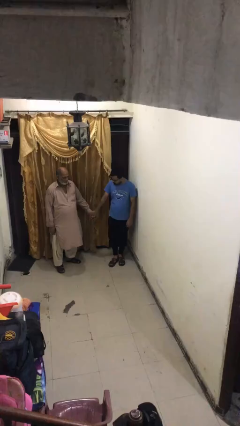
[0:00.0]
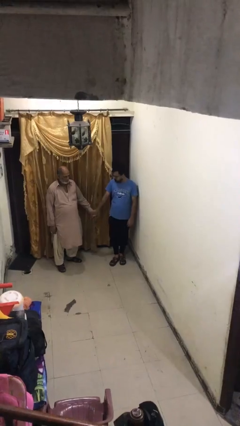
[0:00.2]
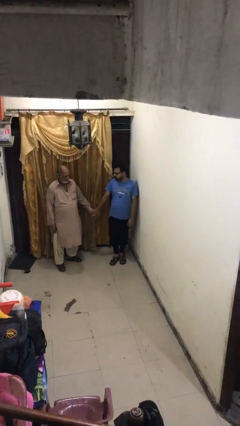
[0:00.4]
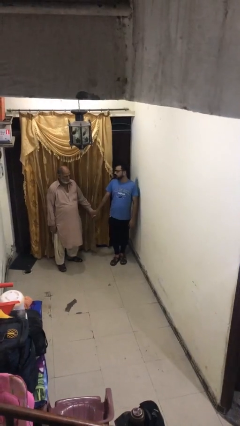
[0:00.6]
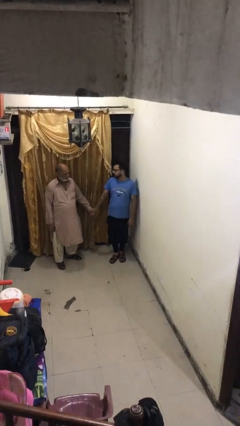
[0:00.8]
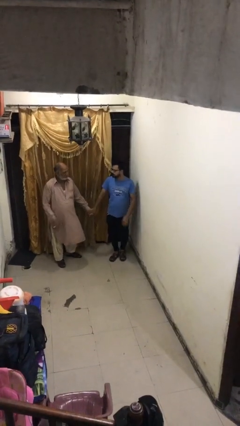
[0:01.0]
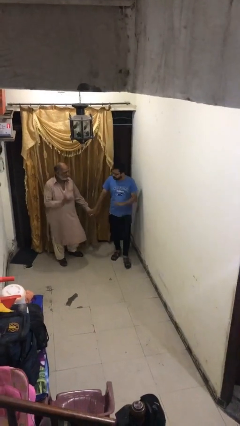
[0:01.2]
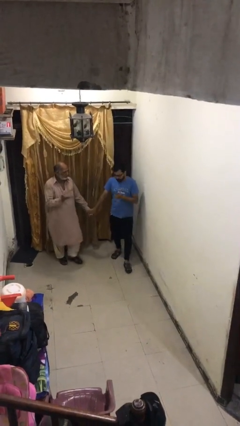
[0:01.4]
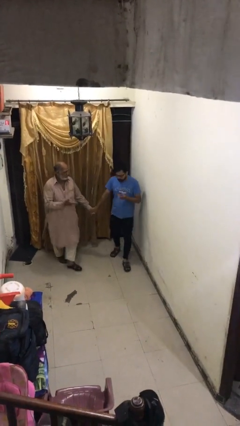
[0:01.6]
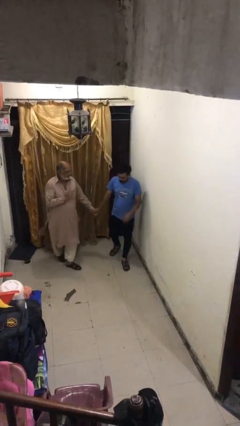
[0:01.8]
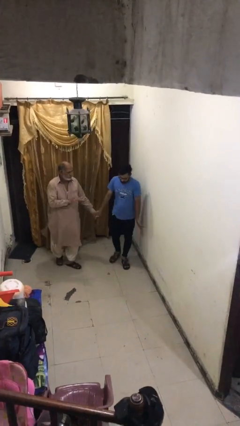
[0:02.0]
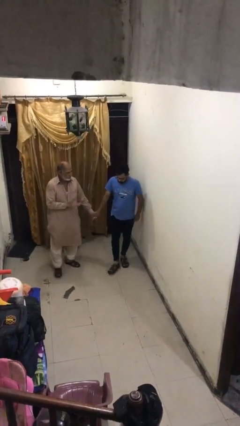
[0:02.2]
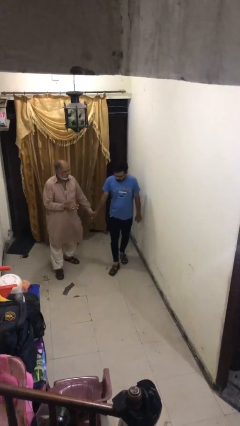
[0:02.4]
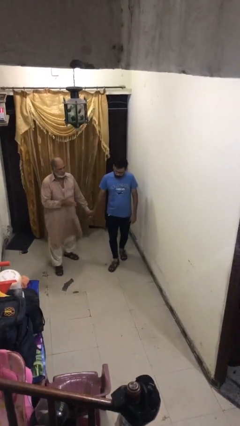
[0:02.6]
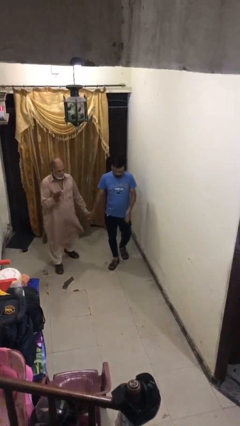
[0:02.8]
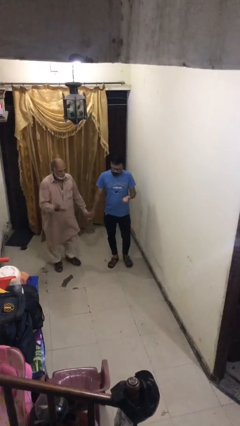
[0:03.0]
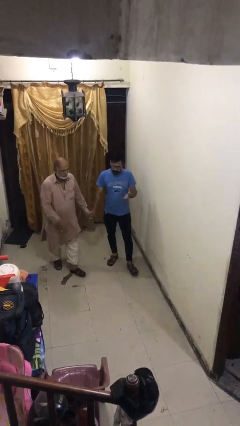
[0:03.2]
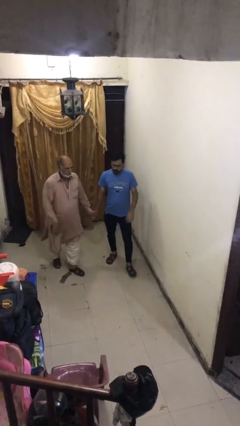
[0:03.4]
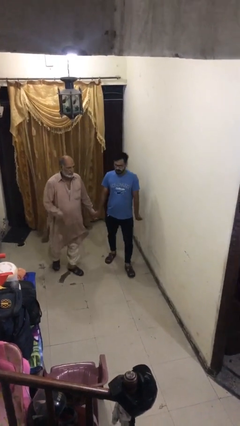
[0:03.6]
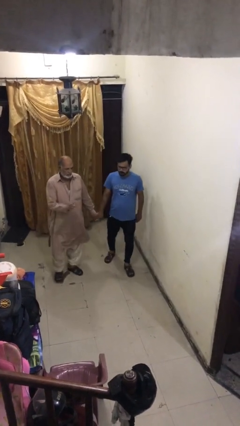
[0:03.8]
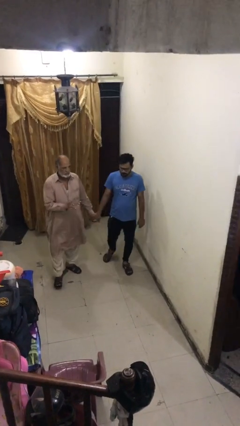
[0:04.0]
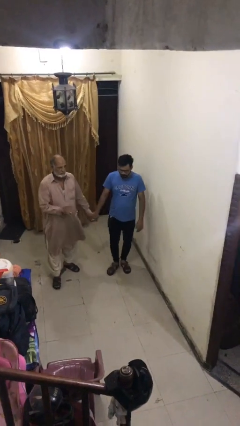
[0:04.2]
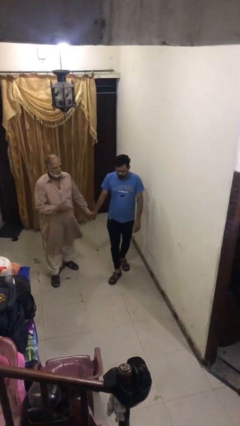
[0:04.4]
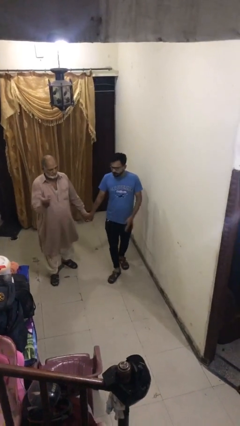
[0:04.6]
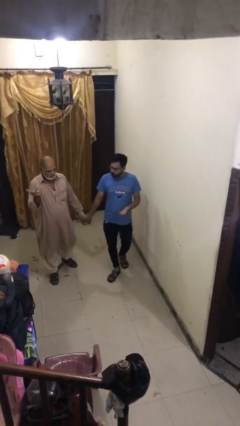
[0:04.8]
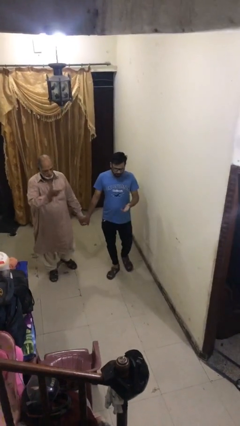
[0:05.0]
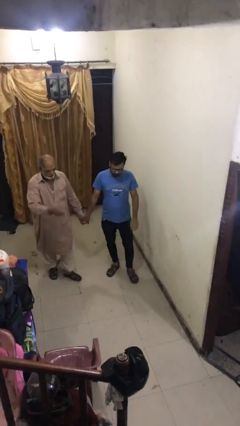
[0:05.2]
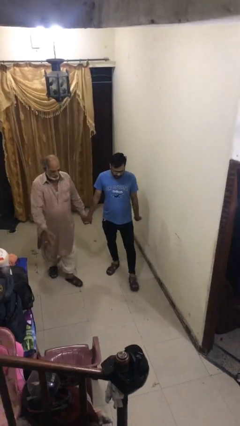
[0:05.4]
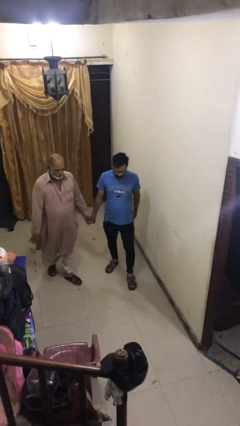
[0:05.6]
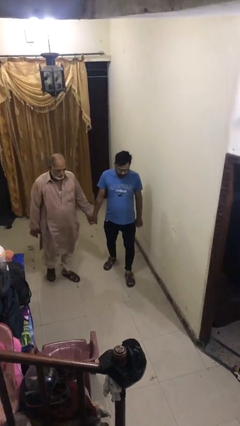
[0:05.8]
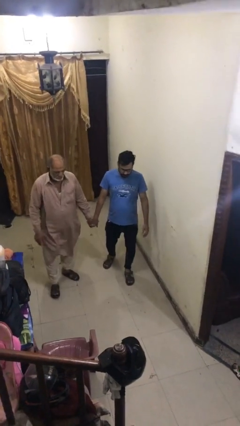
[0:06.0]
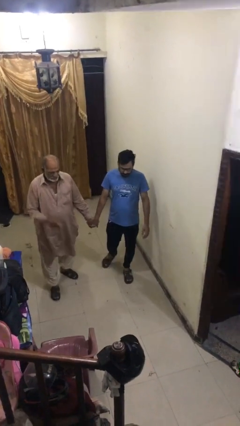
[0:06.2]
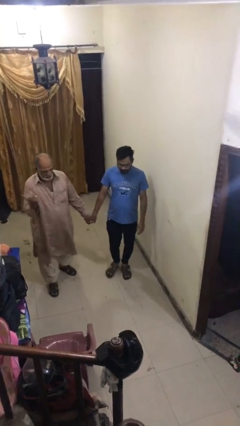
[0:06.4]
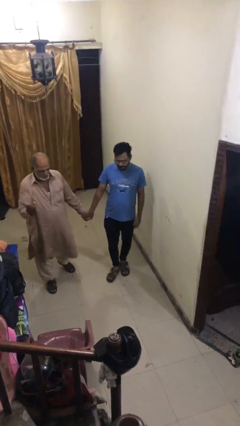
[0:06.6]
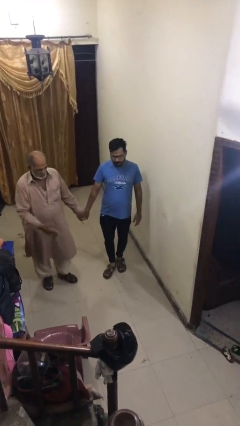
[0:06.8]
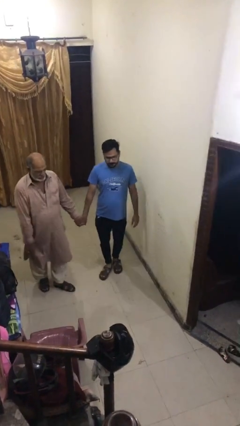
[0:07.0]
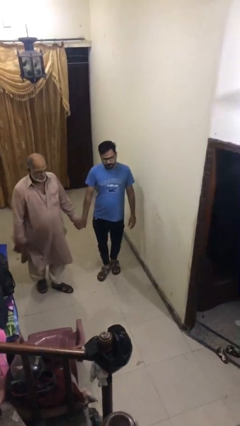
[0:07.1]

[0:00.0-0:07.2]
person holds hand

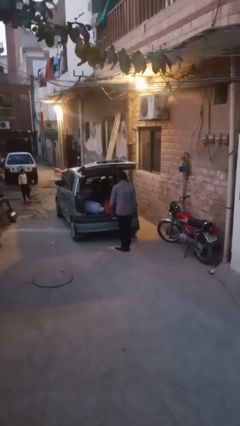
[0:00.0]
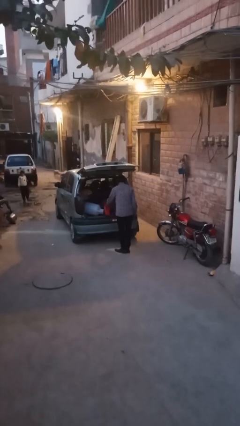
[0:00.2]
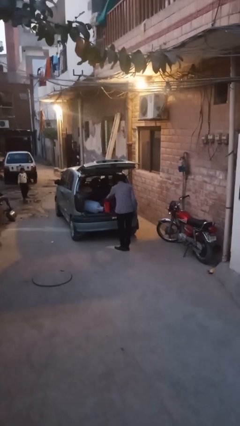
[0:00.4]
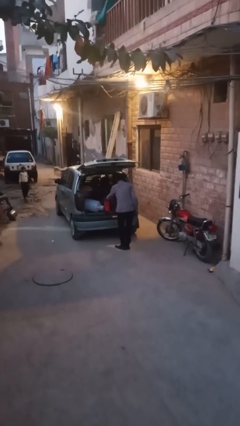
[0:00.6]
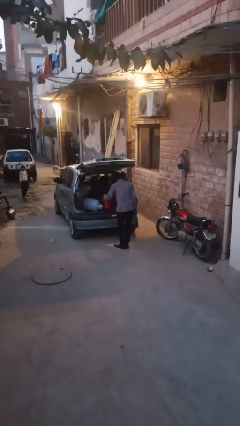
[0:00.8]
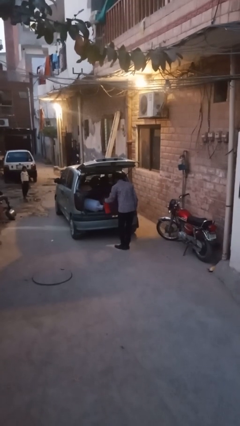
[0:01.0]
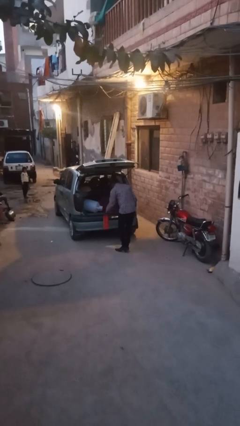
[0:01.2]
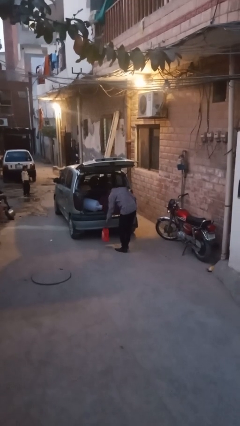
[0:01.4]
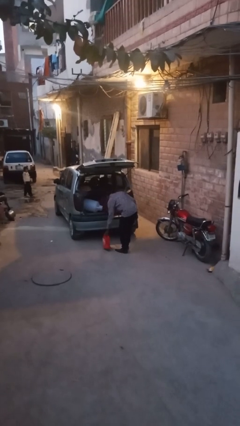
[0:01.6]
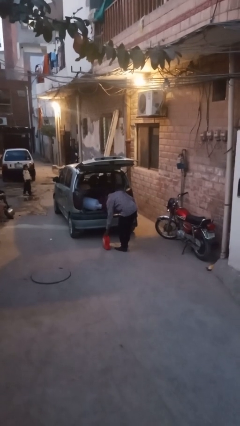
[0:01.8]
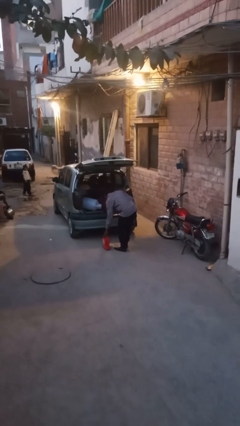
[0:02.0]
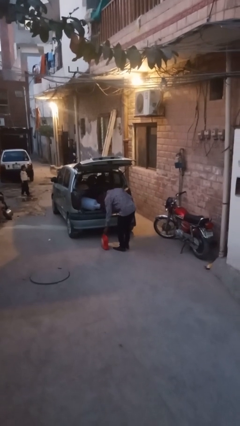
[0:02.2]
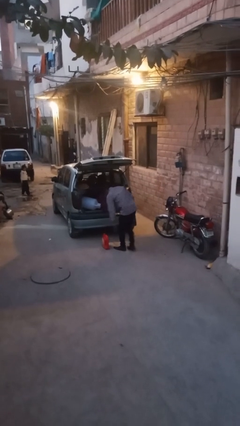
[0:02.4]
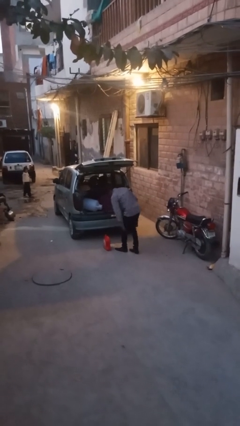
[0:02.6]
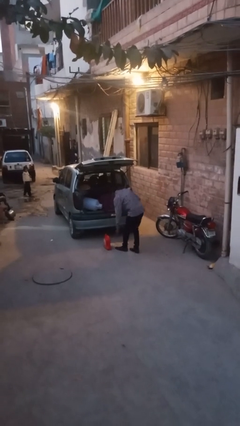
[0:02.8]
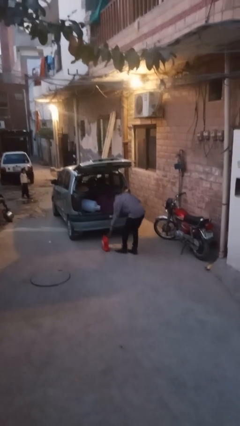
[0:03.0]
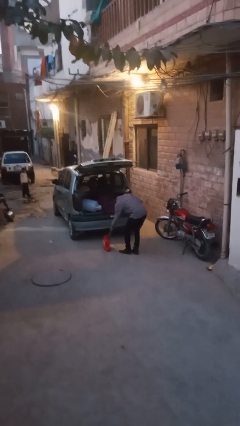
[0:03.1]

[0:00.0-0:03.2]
person unloads car

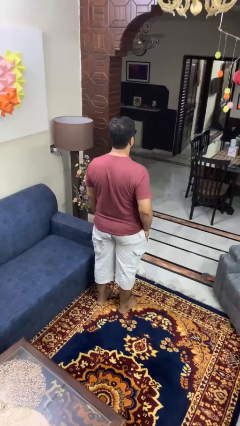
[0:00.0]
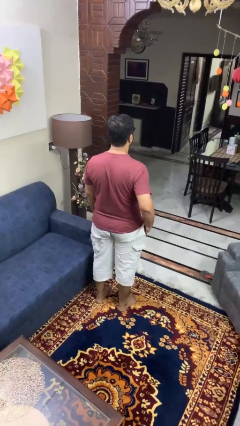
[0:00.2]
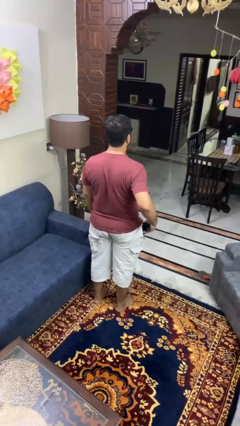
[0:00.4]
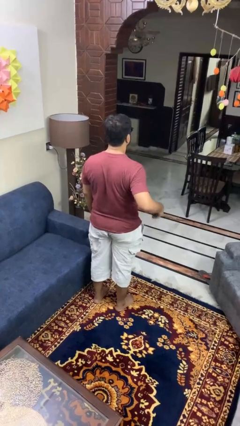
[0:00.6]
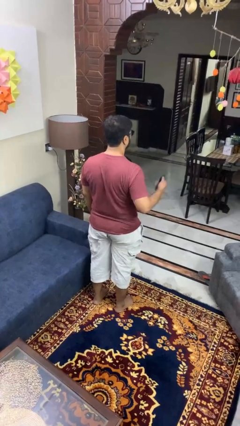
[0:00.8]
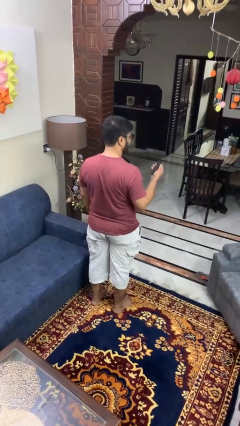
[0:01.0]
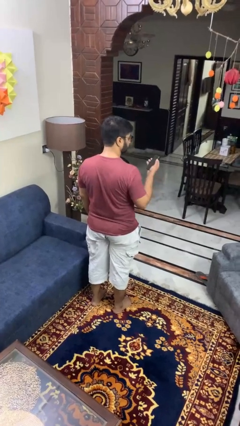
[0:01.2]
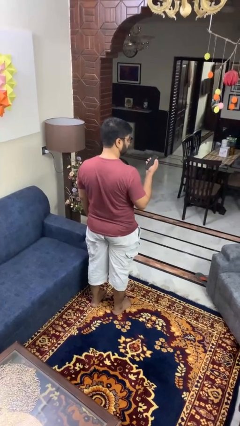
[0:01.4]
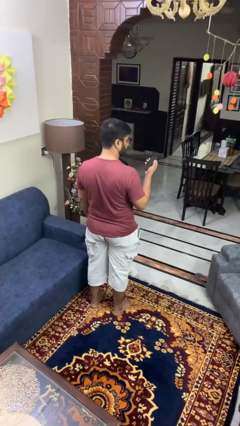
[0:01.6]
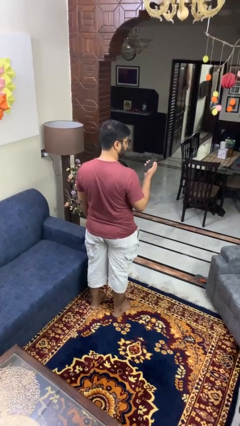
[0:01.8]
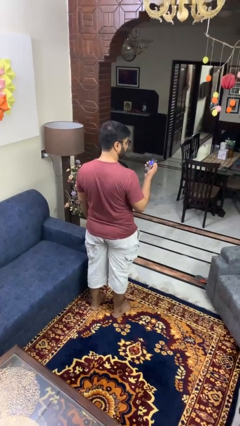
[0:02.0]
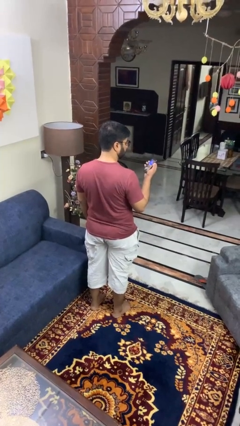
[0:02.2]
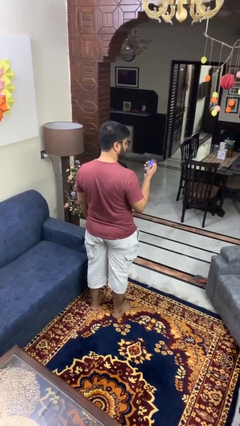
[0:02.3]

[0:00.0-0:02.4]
person takes phone from pocket

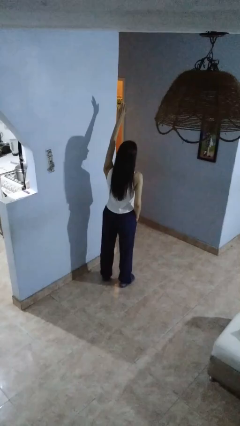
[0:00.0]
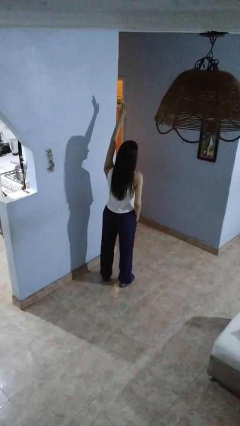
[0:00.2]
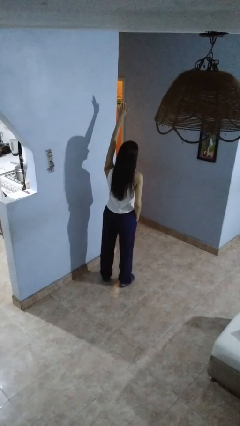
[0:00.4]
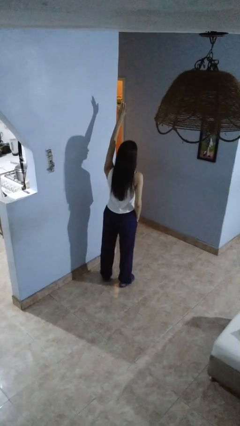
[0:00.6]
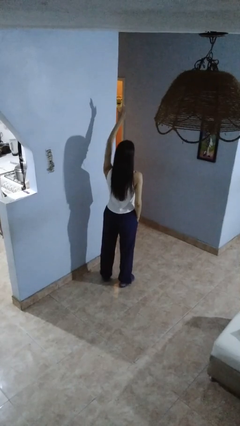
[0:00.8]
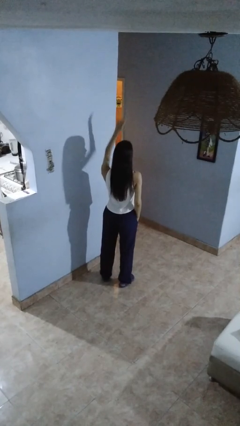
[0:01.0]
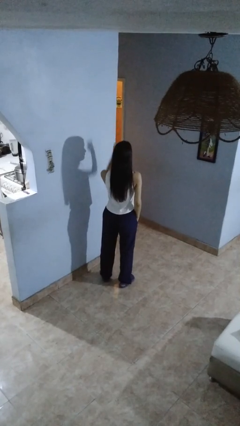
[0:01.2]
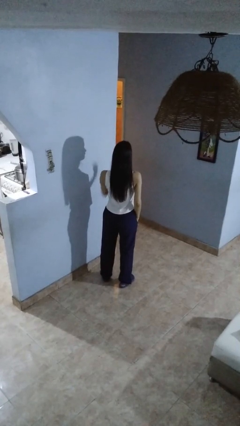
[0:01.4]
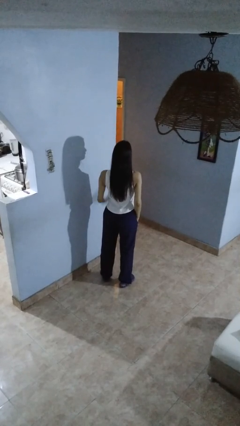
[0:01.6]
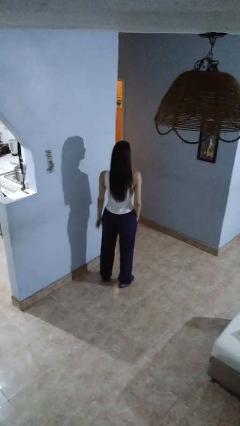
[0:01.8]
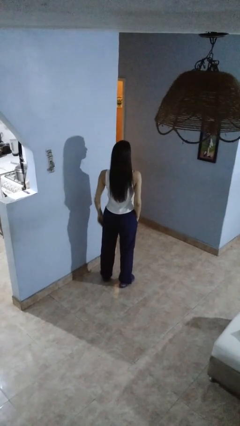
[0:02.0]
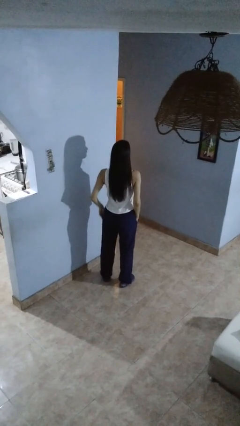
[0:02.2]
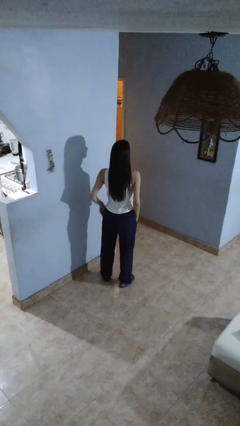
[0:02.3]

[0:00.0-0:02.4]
person gestures lower hand

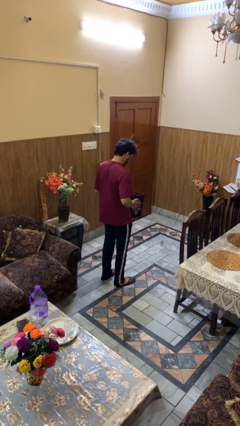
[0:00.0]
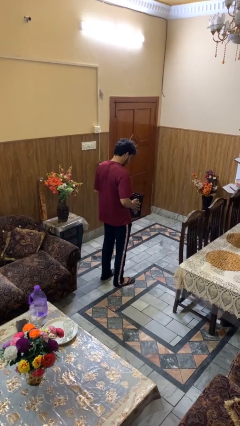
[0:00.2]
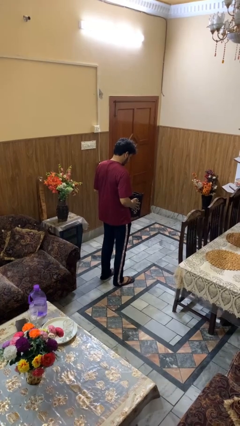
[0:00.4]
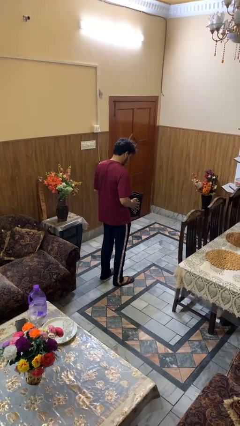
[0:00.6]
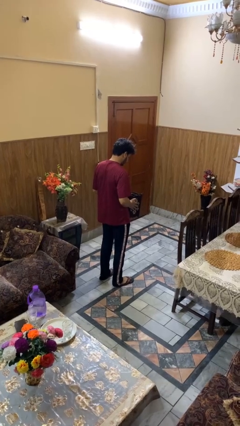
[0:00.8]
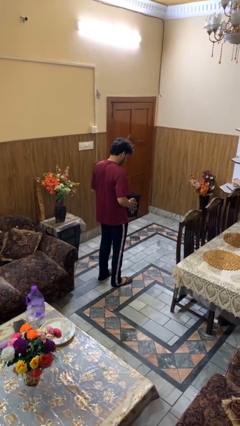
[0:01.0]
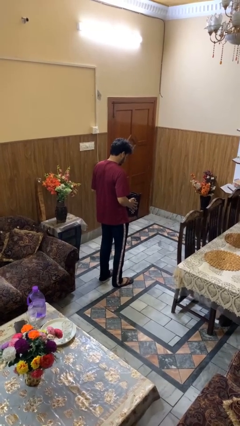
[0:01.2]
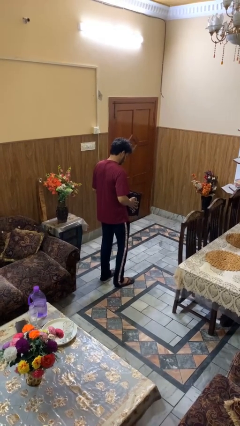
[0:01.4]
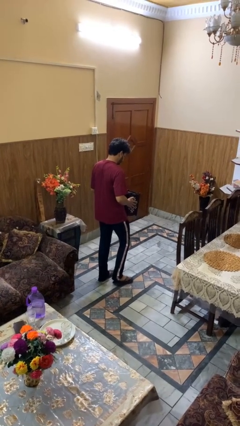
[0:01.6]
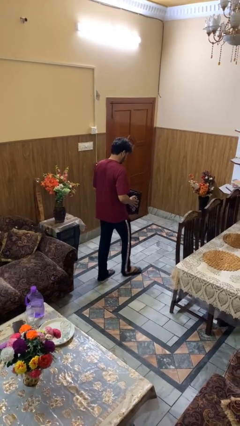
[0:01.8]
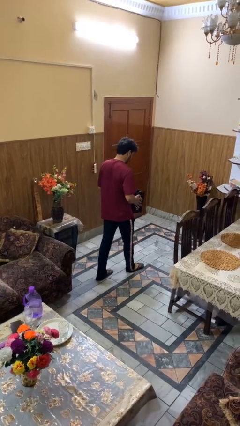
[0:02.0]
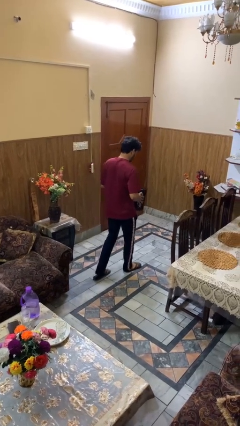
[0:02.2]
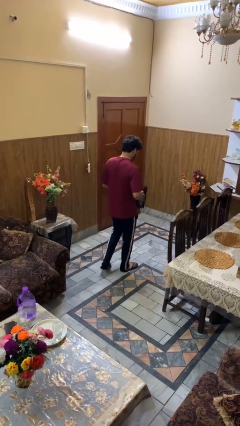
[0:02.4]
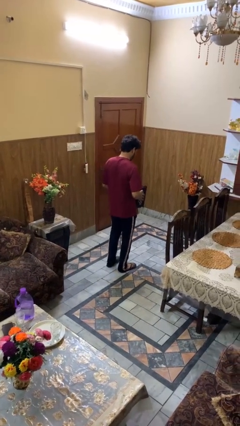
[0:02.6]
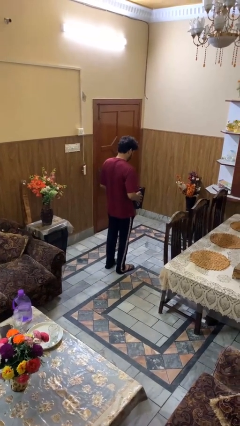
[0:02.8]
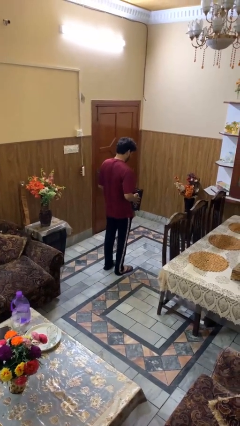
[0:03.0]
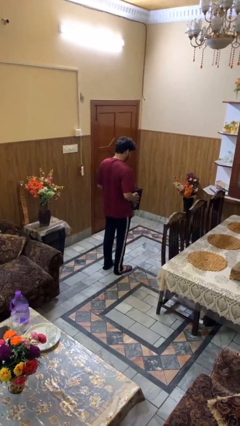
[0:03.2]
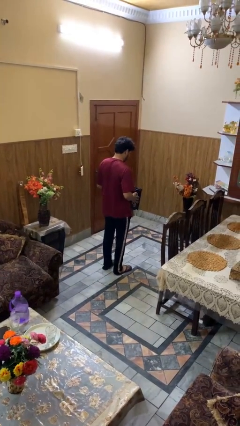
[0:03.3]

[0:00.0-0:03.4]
person carries groceries
